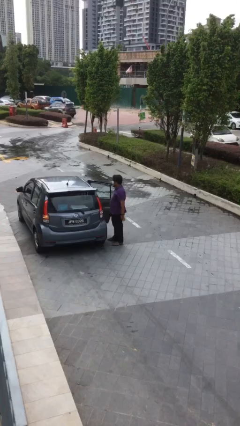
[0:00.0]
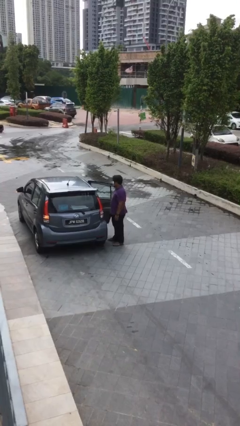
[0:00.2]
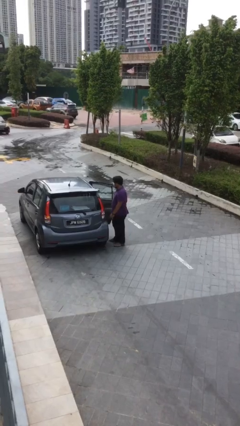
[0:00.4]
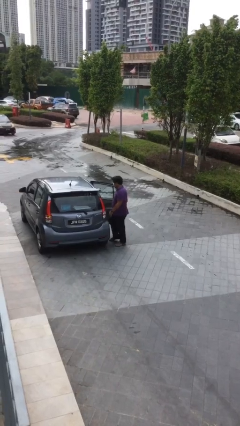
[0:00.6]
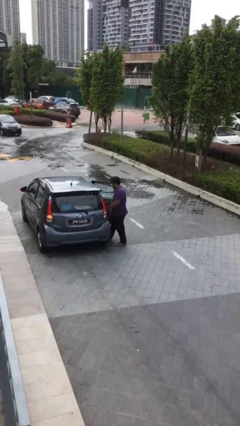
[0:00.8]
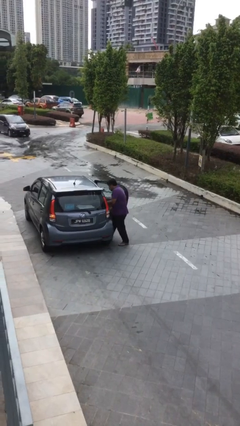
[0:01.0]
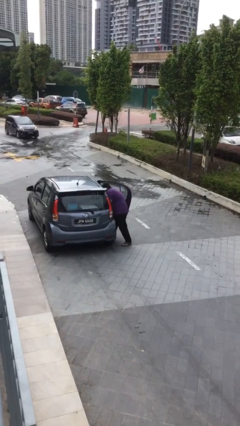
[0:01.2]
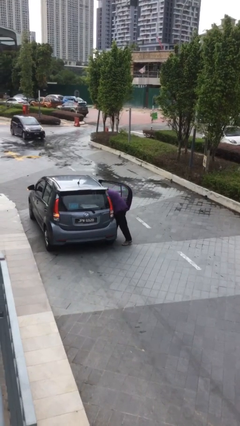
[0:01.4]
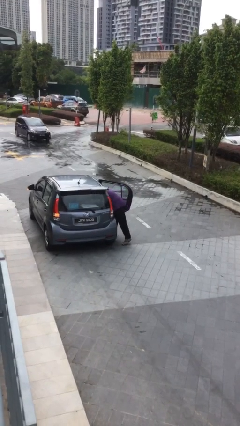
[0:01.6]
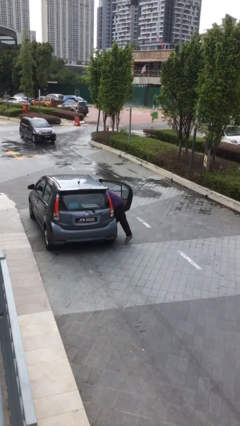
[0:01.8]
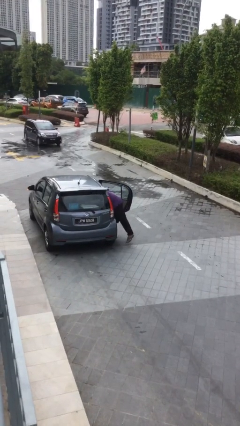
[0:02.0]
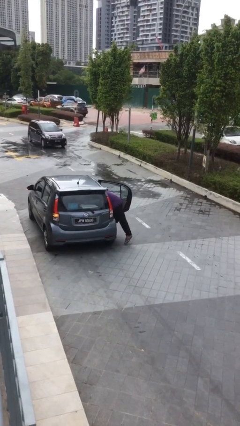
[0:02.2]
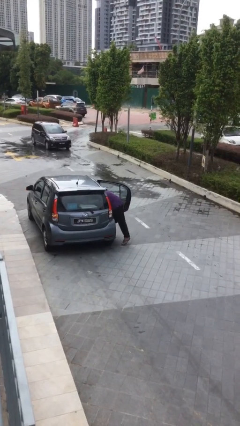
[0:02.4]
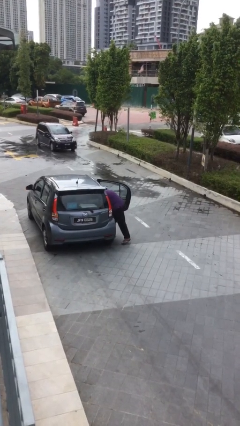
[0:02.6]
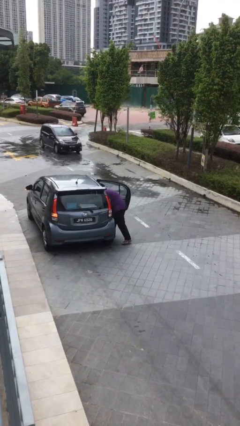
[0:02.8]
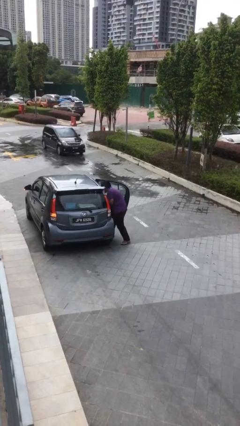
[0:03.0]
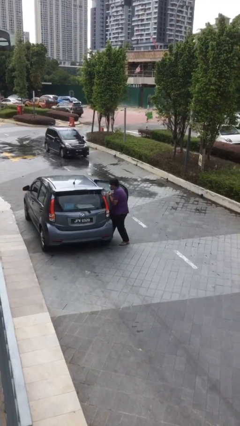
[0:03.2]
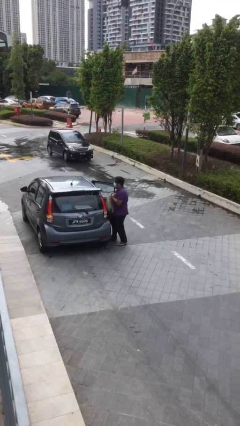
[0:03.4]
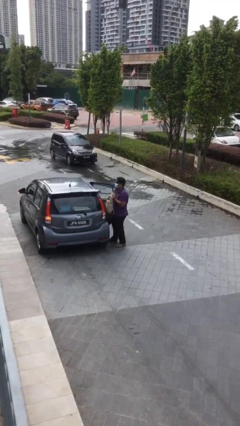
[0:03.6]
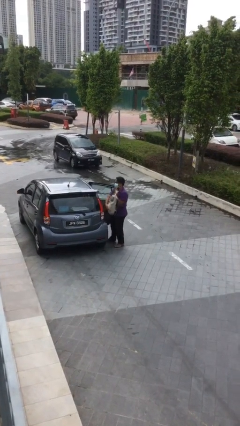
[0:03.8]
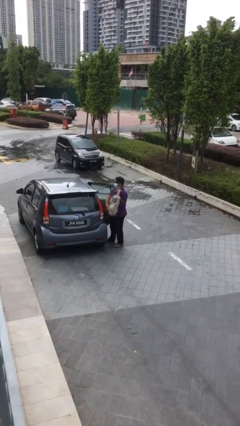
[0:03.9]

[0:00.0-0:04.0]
person unloads car

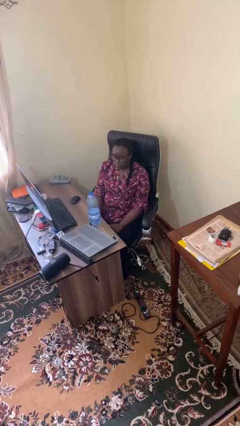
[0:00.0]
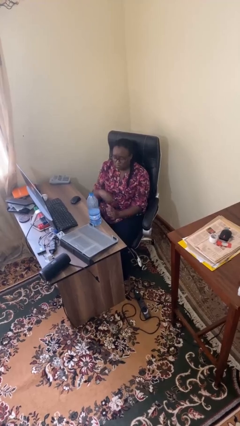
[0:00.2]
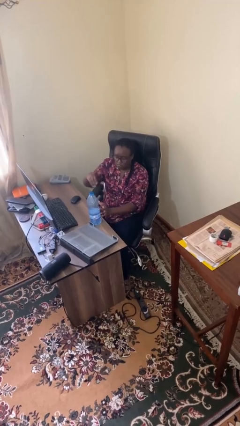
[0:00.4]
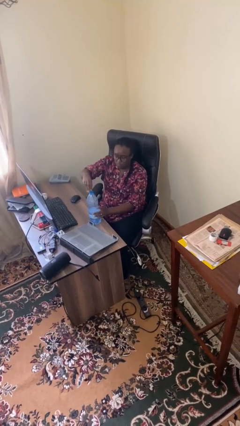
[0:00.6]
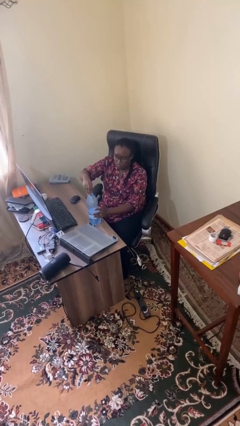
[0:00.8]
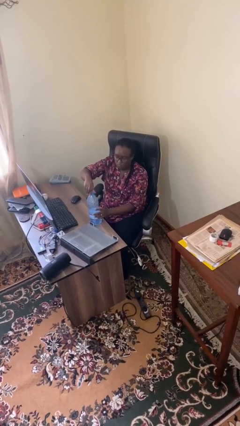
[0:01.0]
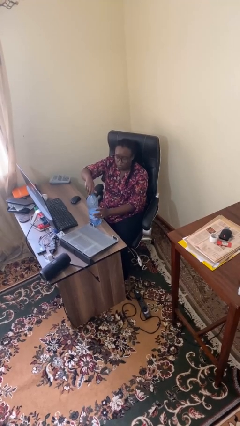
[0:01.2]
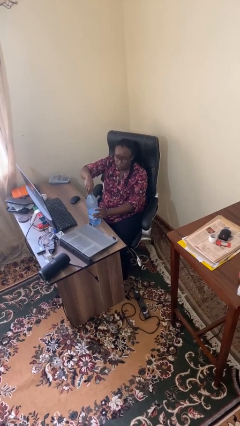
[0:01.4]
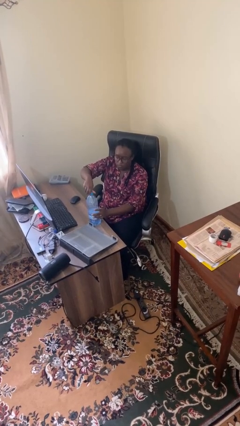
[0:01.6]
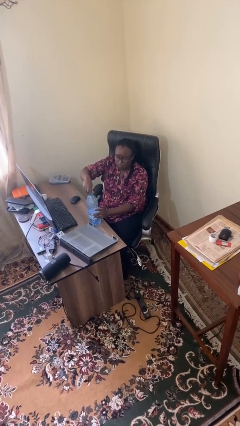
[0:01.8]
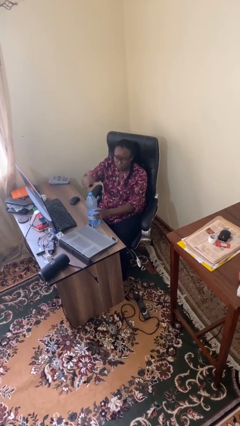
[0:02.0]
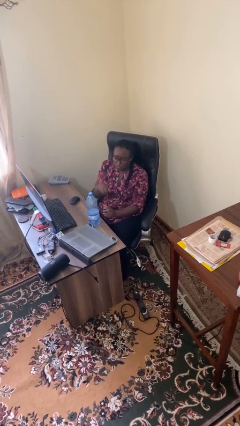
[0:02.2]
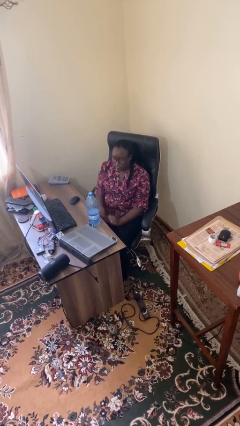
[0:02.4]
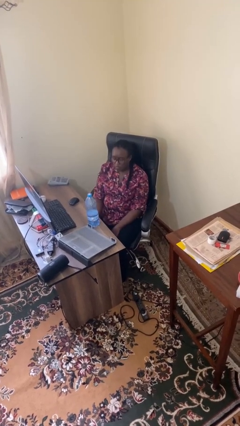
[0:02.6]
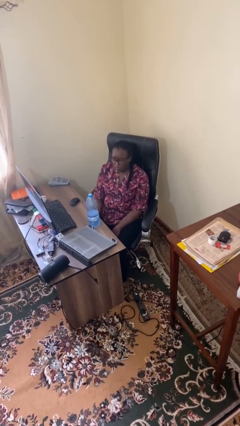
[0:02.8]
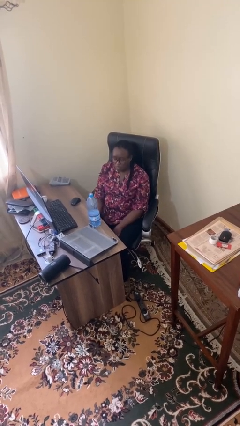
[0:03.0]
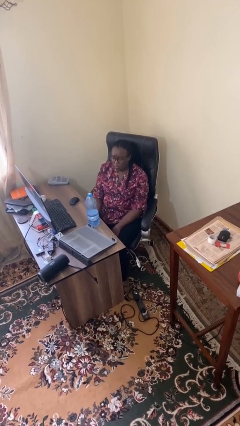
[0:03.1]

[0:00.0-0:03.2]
person screws lid to bottle

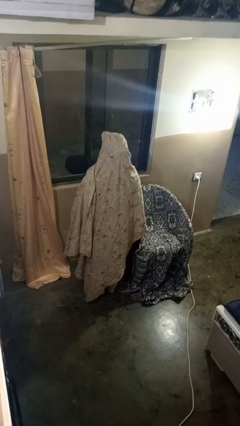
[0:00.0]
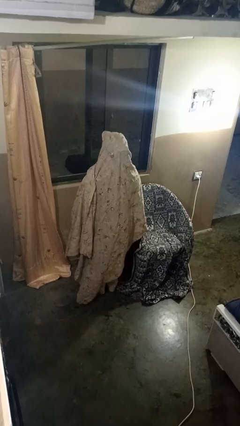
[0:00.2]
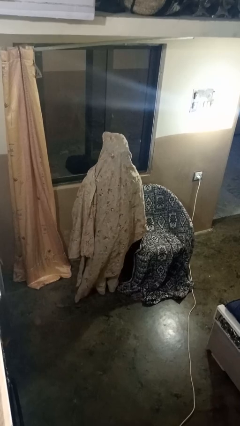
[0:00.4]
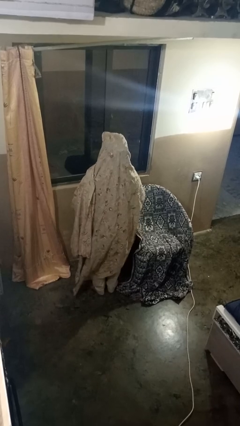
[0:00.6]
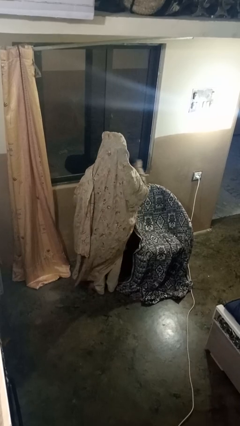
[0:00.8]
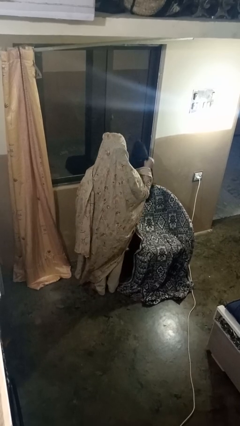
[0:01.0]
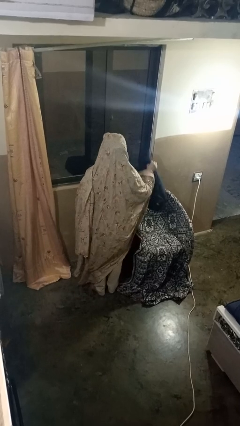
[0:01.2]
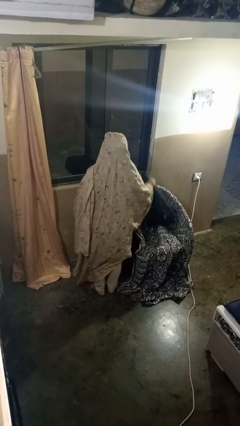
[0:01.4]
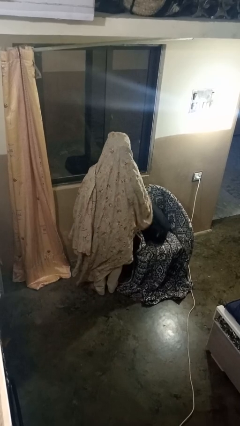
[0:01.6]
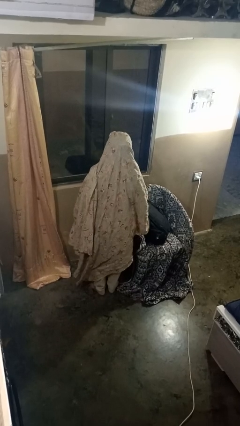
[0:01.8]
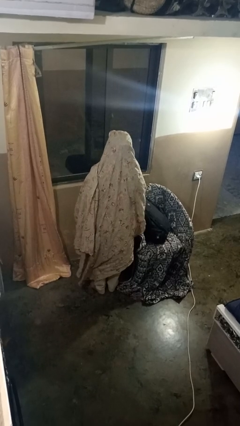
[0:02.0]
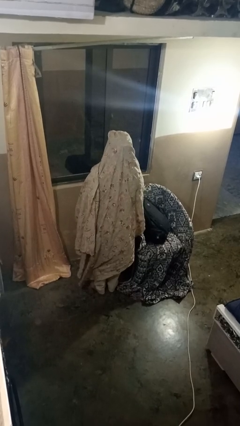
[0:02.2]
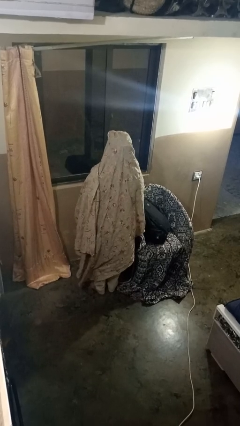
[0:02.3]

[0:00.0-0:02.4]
person puts down object on couch

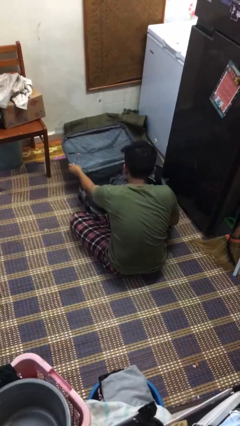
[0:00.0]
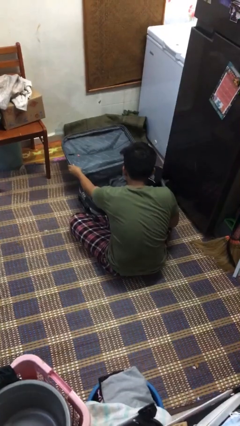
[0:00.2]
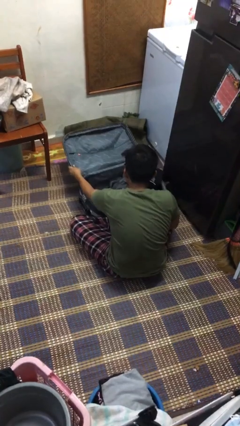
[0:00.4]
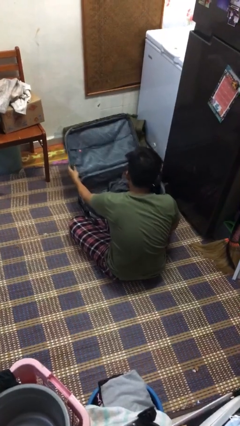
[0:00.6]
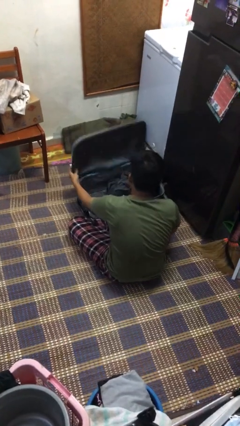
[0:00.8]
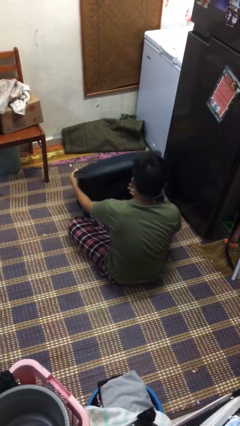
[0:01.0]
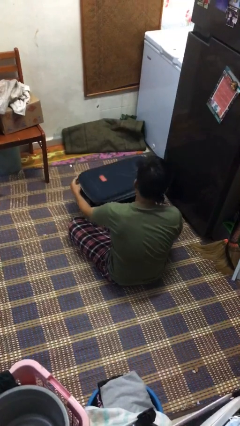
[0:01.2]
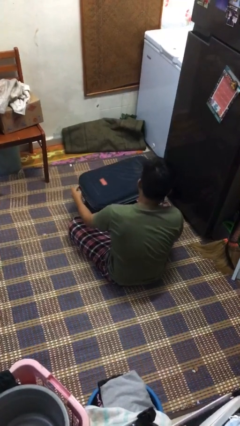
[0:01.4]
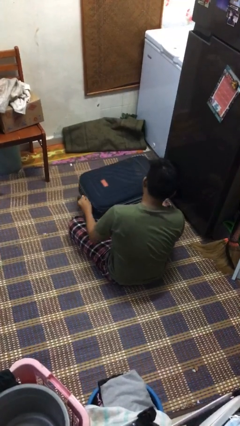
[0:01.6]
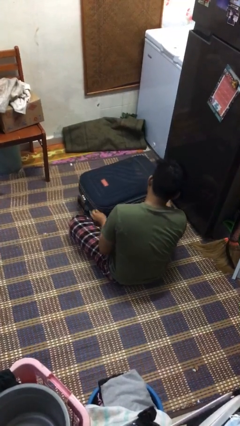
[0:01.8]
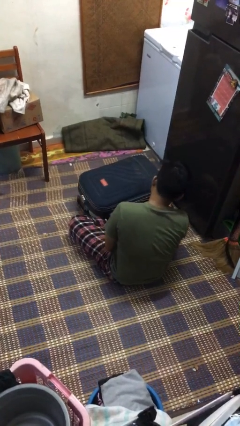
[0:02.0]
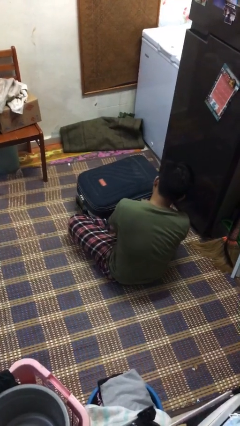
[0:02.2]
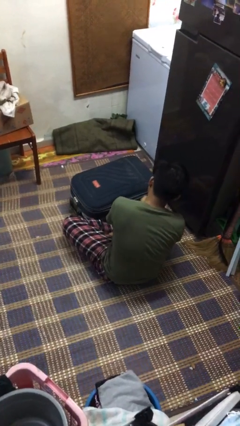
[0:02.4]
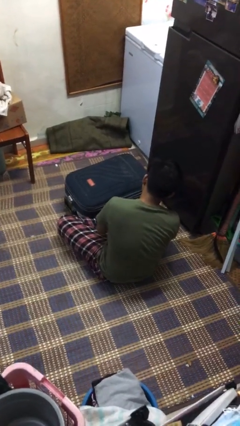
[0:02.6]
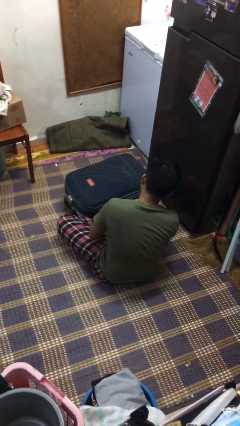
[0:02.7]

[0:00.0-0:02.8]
person closes suitcase

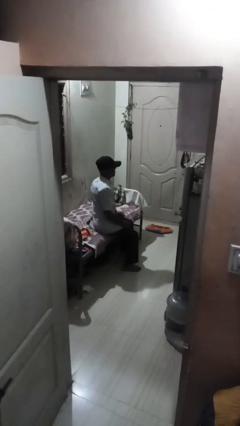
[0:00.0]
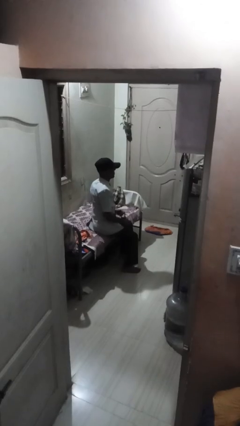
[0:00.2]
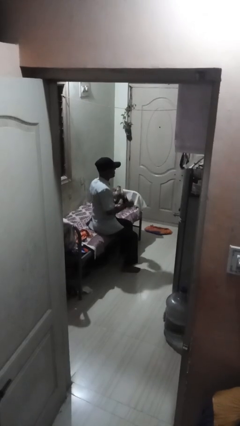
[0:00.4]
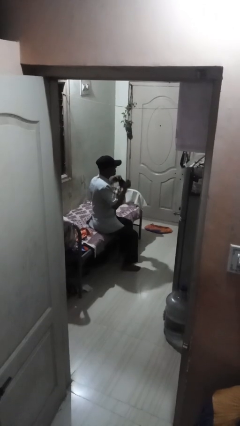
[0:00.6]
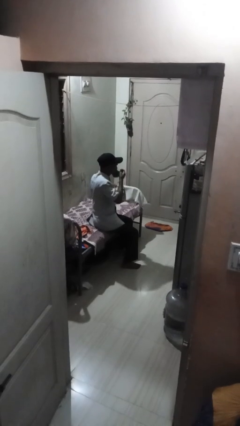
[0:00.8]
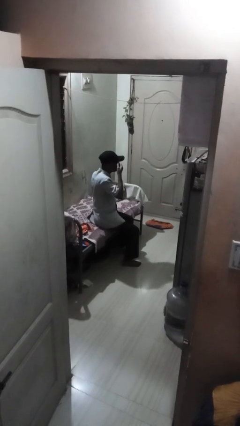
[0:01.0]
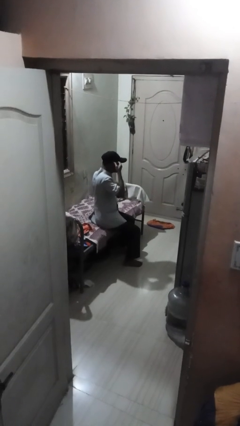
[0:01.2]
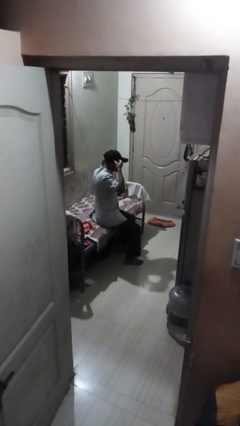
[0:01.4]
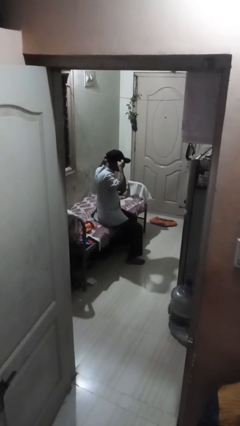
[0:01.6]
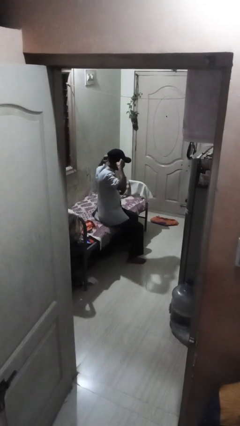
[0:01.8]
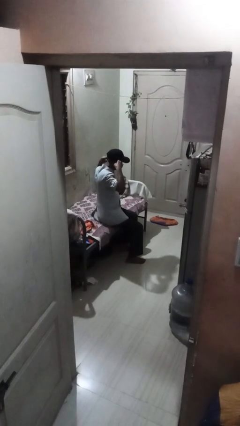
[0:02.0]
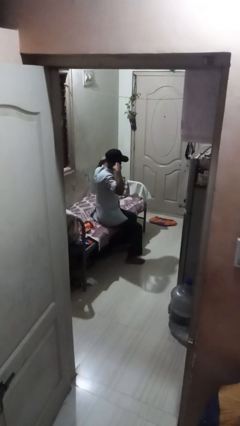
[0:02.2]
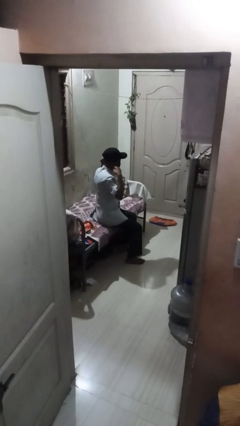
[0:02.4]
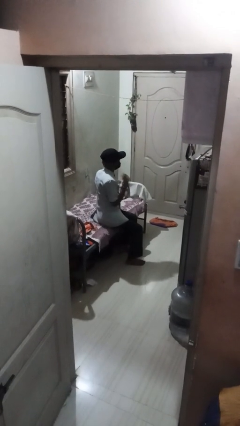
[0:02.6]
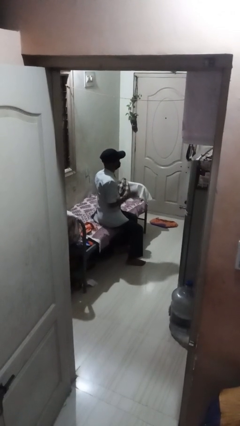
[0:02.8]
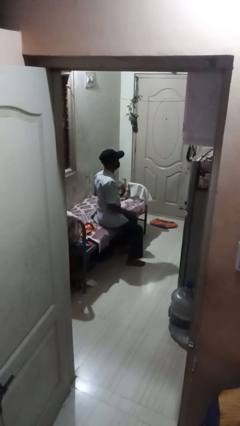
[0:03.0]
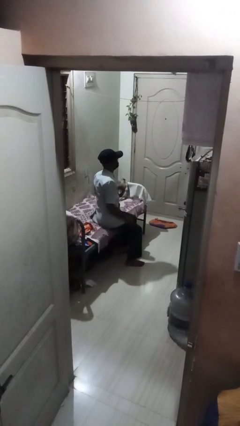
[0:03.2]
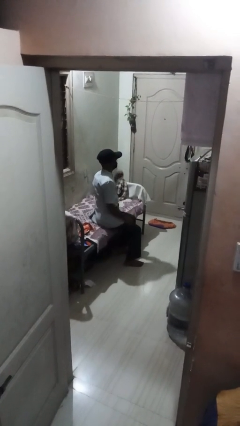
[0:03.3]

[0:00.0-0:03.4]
person puts on facemask

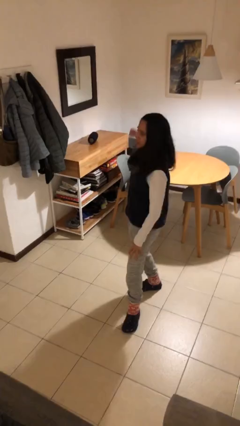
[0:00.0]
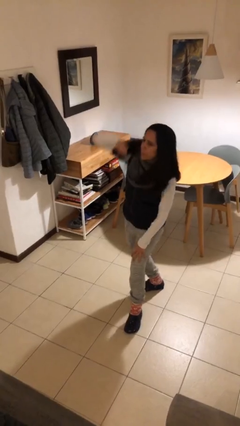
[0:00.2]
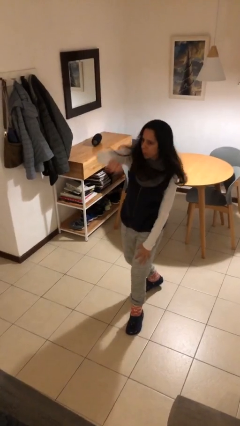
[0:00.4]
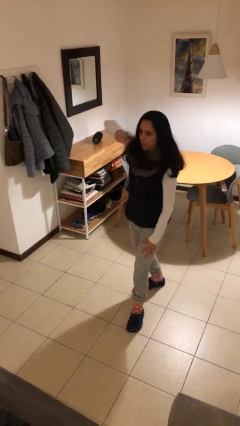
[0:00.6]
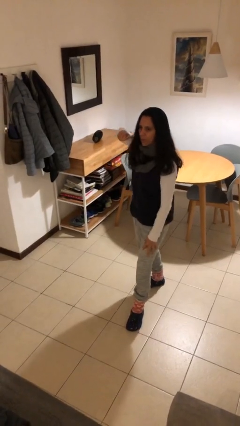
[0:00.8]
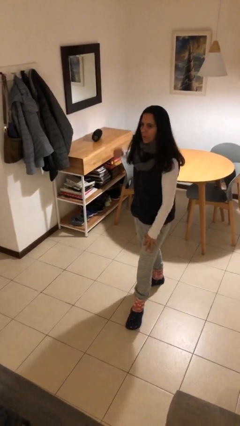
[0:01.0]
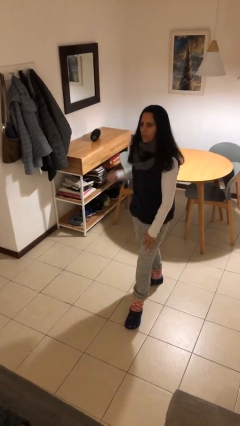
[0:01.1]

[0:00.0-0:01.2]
person punches

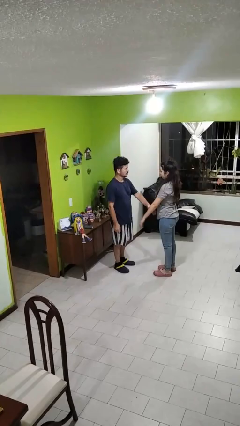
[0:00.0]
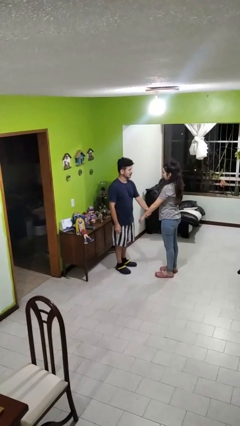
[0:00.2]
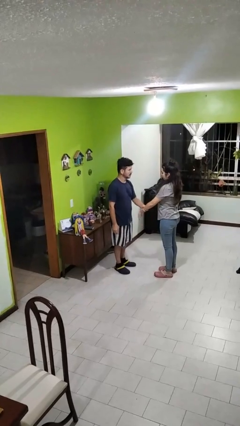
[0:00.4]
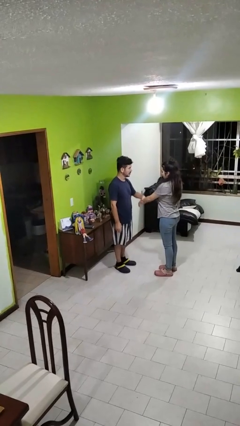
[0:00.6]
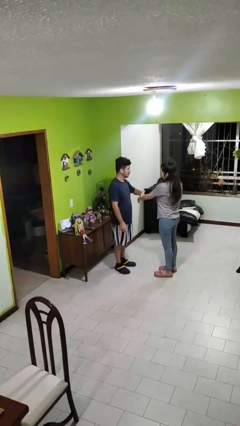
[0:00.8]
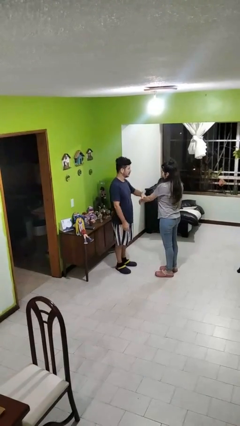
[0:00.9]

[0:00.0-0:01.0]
person grabs person by forearm
